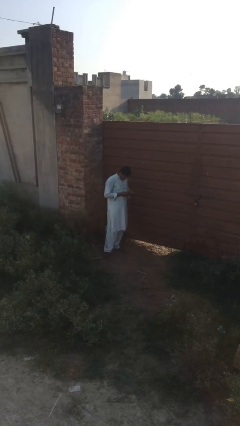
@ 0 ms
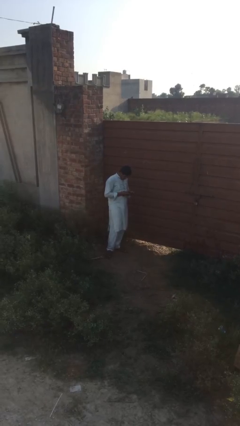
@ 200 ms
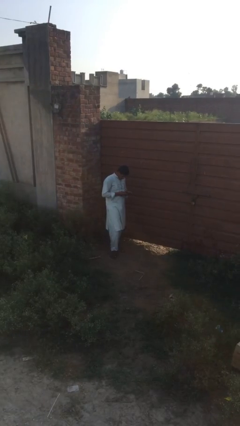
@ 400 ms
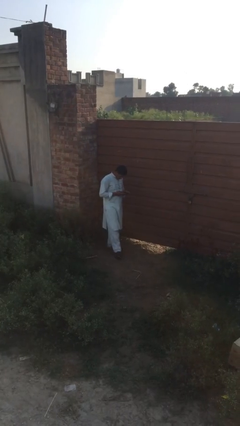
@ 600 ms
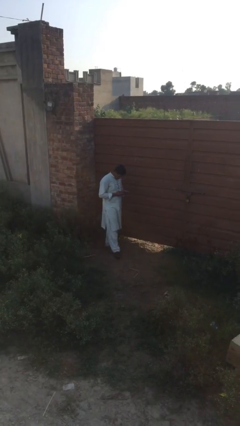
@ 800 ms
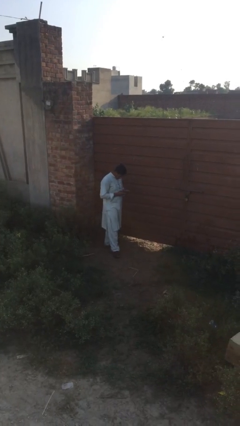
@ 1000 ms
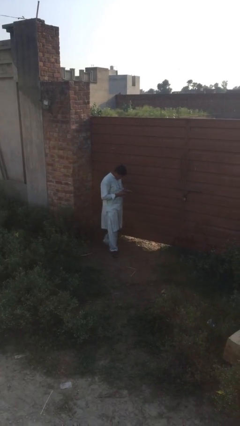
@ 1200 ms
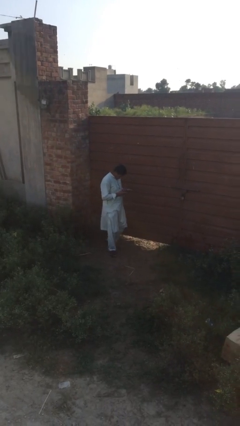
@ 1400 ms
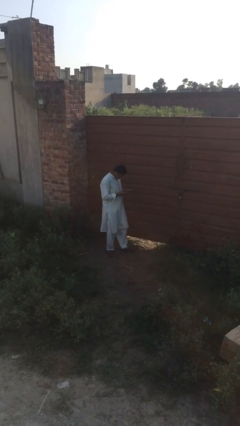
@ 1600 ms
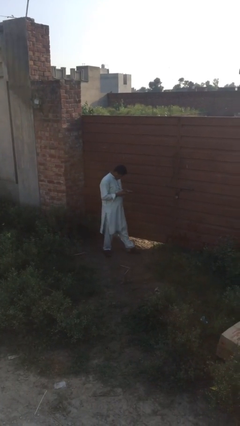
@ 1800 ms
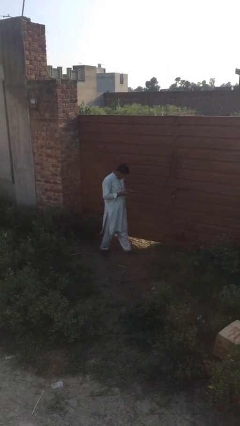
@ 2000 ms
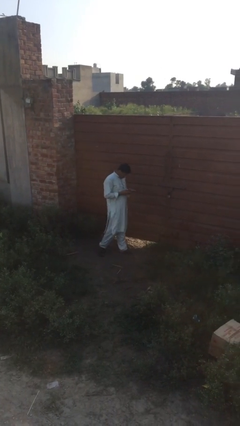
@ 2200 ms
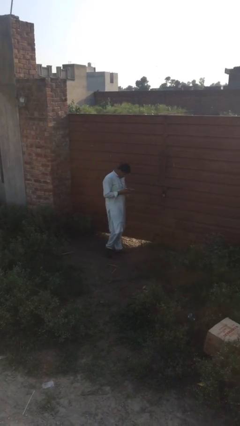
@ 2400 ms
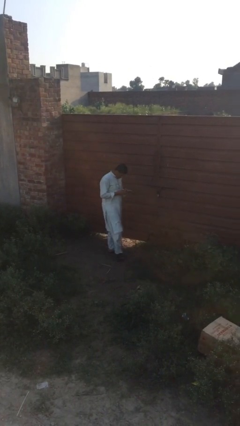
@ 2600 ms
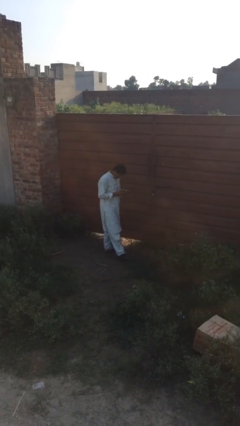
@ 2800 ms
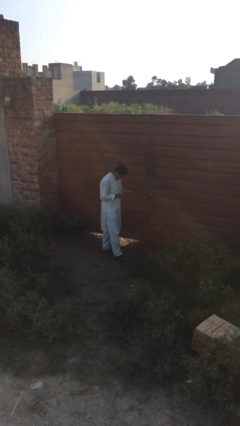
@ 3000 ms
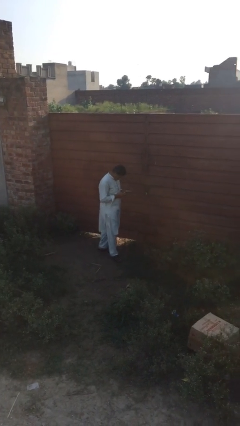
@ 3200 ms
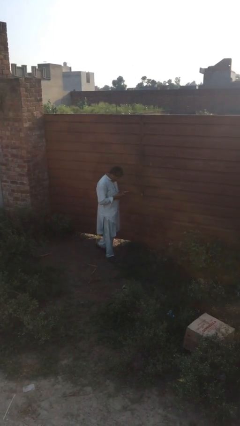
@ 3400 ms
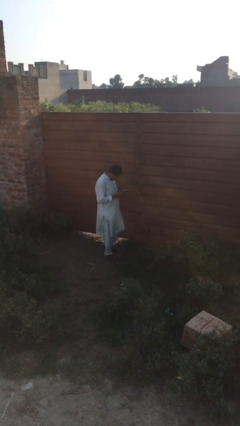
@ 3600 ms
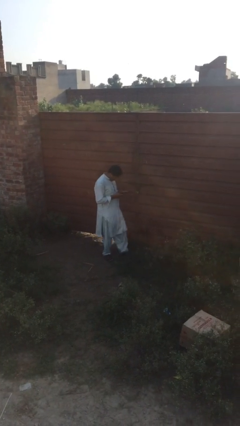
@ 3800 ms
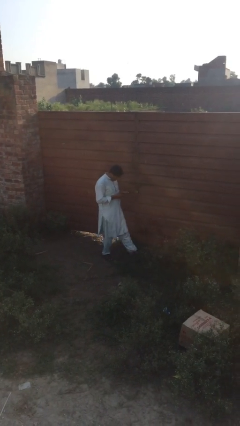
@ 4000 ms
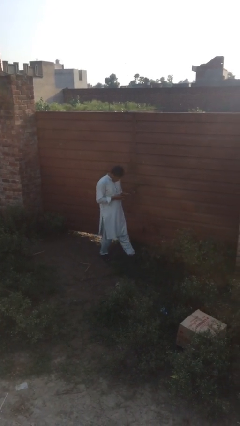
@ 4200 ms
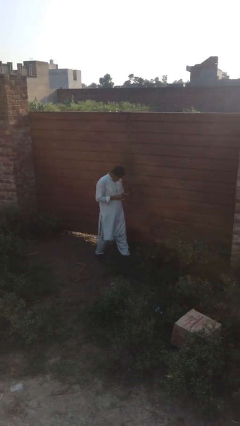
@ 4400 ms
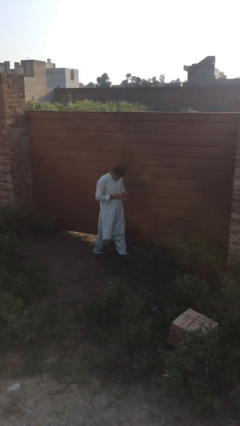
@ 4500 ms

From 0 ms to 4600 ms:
person texts on phone

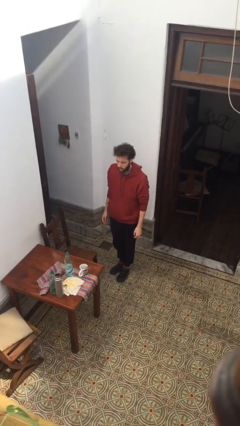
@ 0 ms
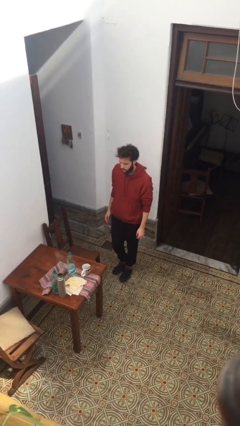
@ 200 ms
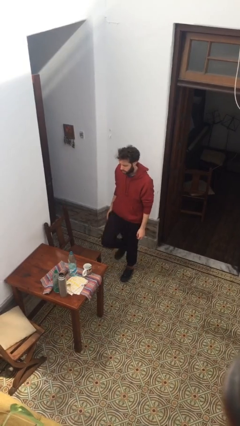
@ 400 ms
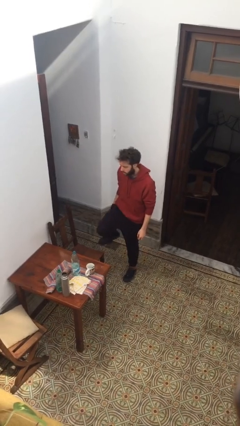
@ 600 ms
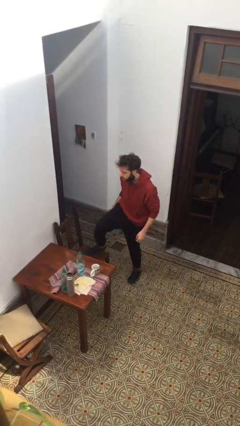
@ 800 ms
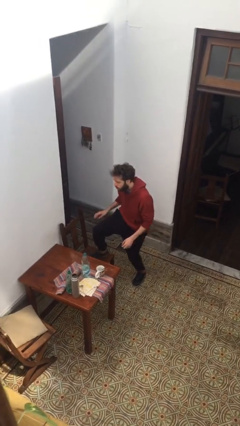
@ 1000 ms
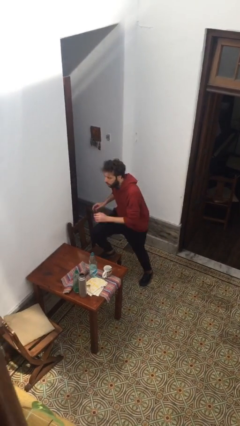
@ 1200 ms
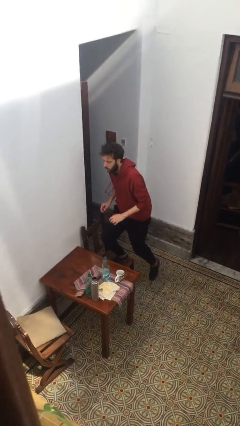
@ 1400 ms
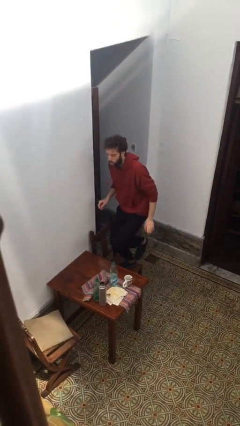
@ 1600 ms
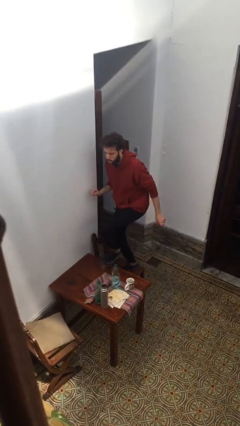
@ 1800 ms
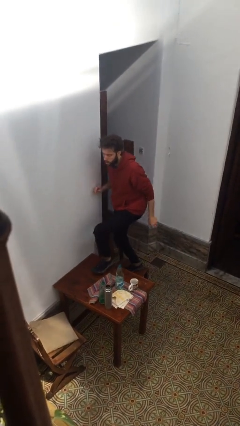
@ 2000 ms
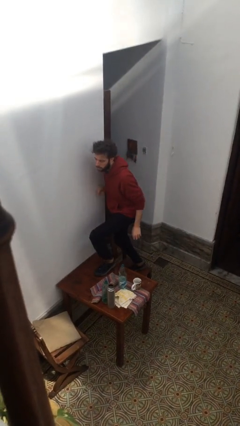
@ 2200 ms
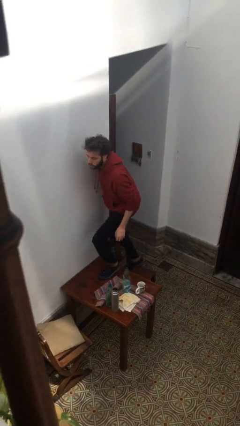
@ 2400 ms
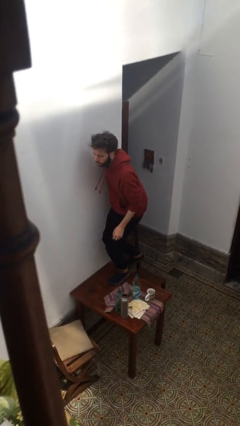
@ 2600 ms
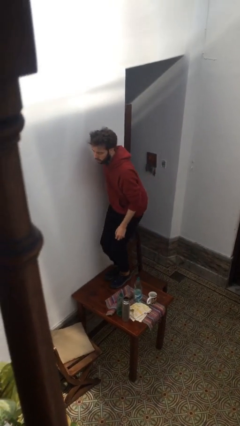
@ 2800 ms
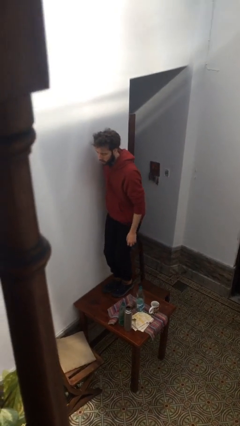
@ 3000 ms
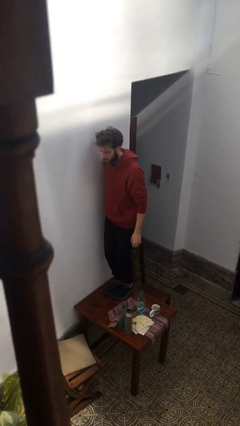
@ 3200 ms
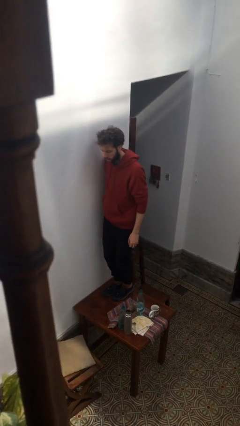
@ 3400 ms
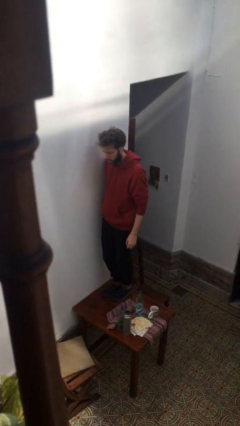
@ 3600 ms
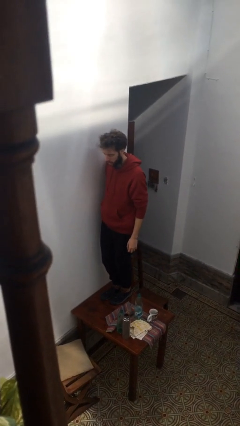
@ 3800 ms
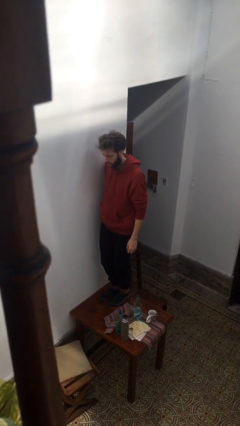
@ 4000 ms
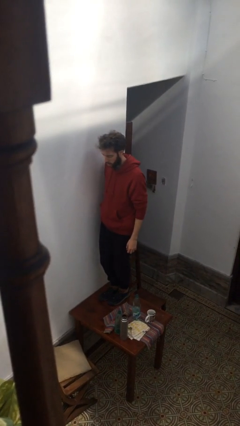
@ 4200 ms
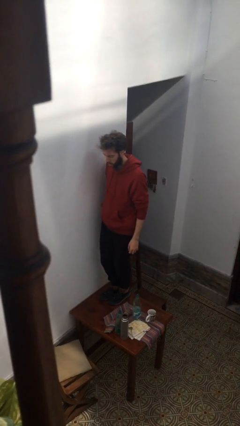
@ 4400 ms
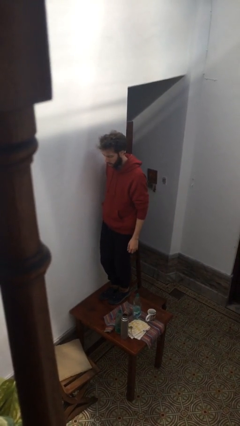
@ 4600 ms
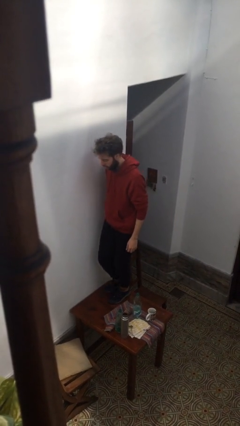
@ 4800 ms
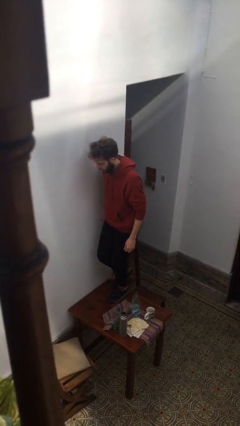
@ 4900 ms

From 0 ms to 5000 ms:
person climbs on table

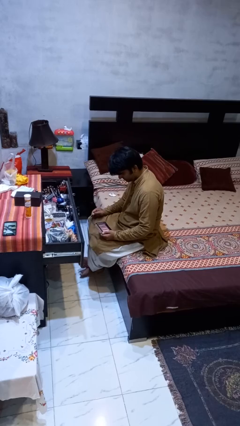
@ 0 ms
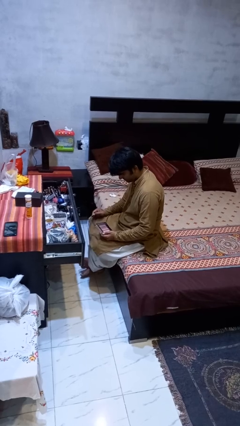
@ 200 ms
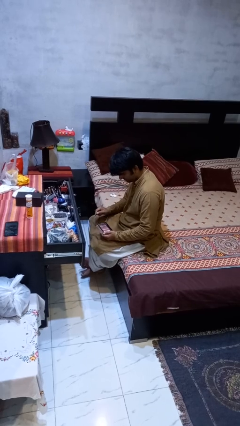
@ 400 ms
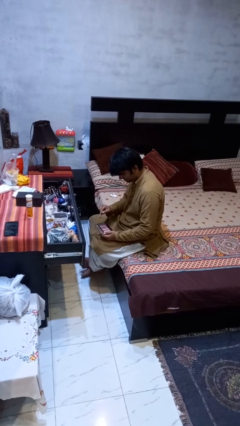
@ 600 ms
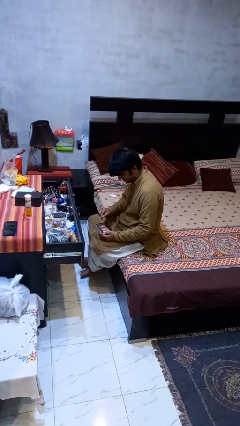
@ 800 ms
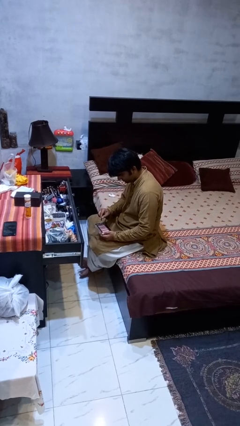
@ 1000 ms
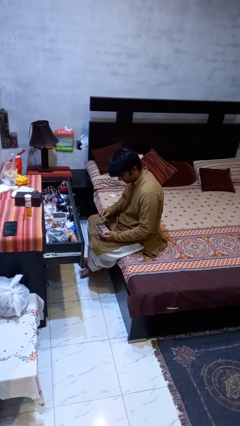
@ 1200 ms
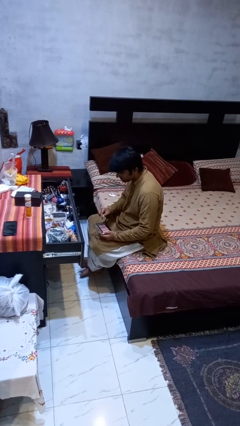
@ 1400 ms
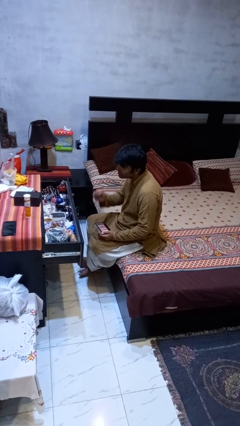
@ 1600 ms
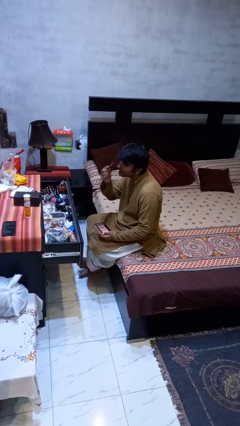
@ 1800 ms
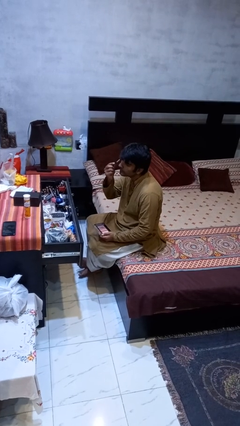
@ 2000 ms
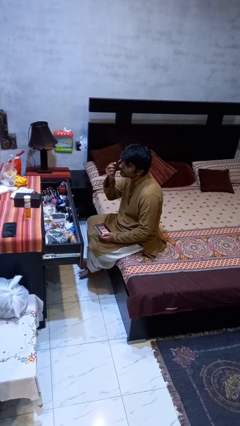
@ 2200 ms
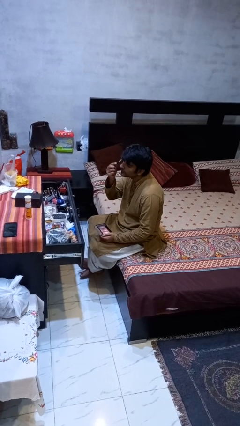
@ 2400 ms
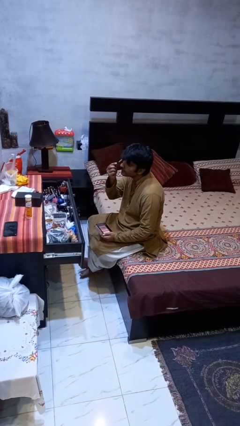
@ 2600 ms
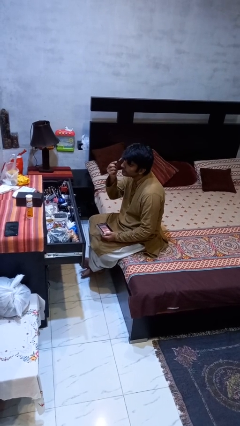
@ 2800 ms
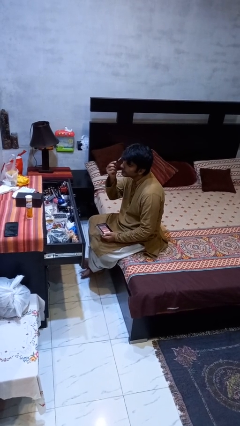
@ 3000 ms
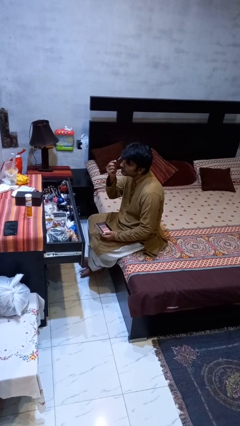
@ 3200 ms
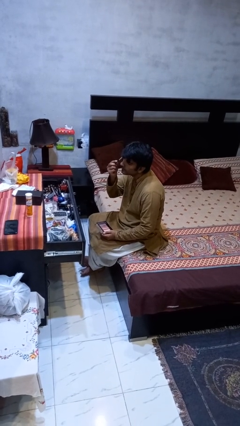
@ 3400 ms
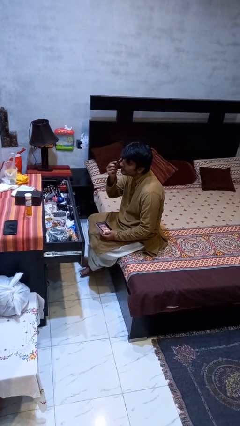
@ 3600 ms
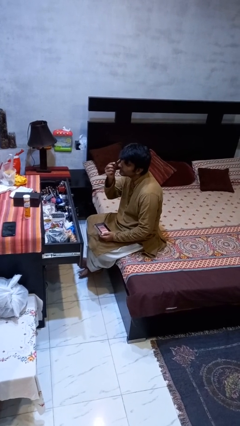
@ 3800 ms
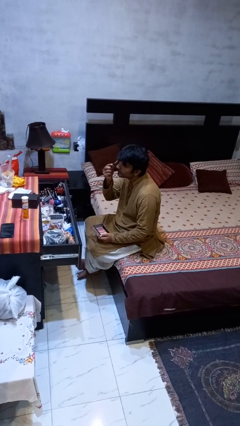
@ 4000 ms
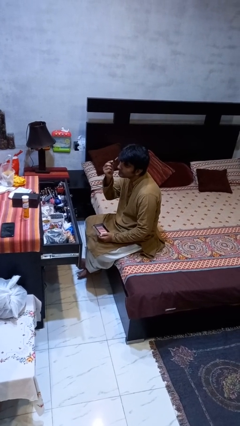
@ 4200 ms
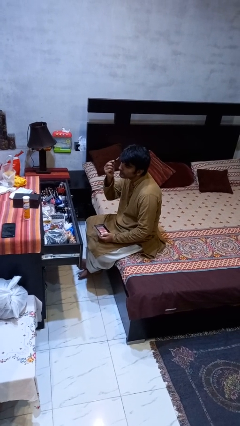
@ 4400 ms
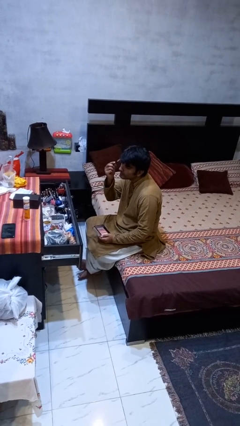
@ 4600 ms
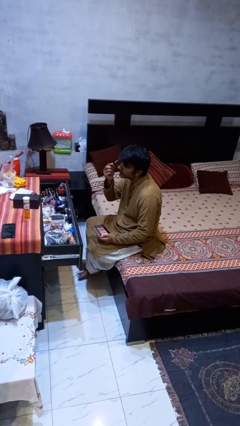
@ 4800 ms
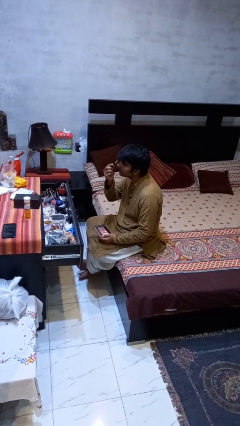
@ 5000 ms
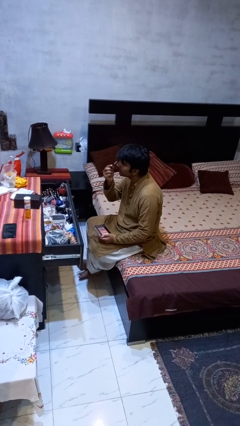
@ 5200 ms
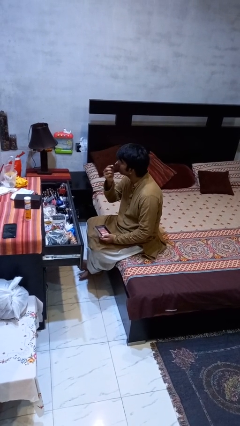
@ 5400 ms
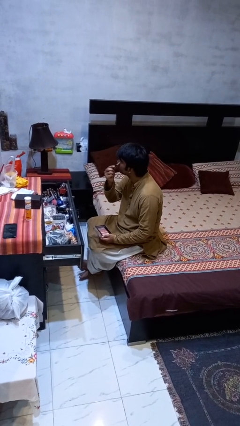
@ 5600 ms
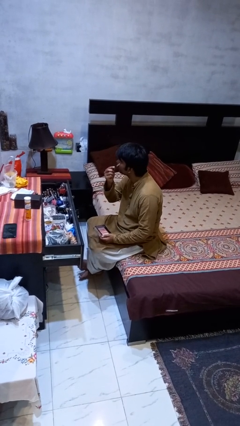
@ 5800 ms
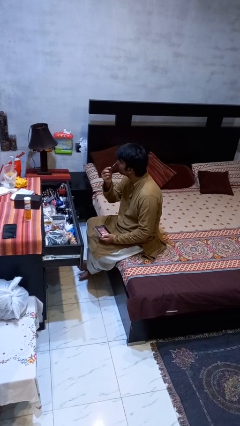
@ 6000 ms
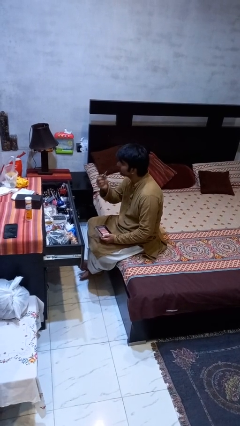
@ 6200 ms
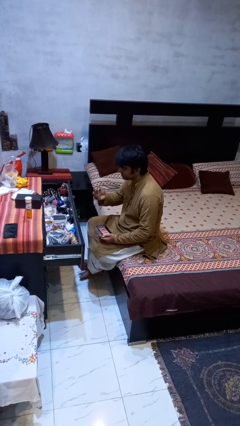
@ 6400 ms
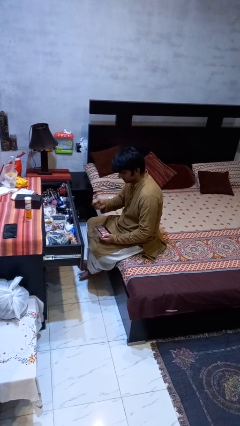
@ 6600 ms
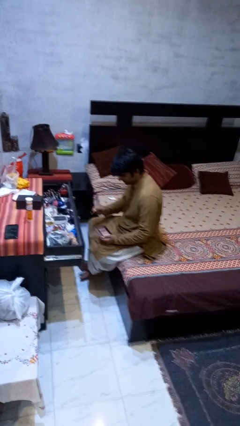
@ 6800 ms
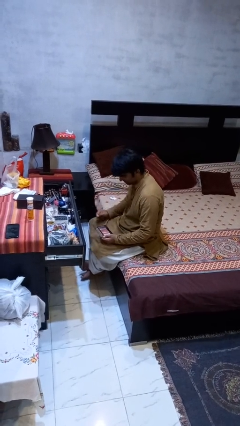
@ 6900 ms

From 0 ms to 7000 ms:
person applies eye makeup

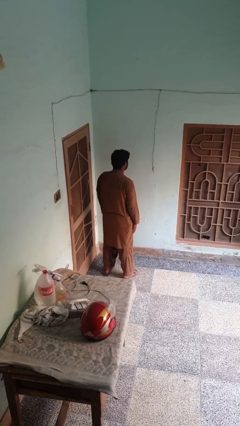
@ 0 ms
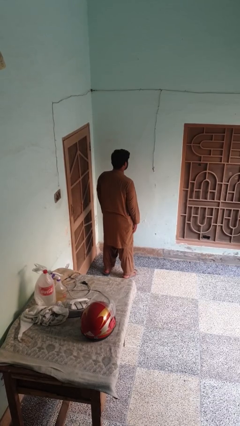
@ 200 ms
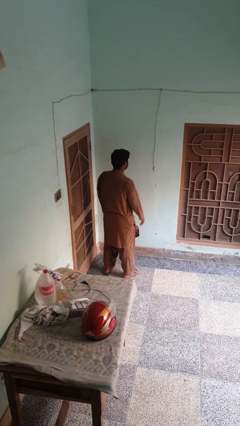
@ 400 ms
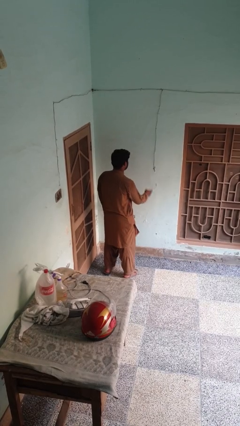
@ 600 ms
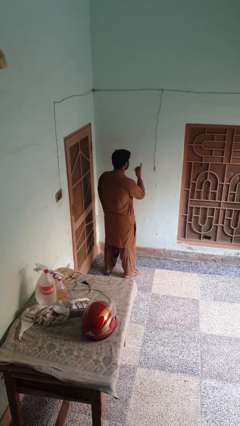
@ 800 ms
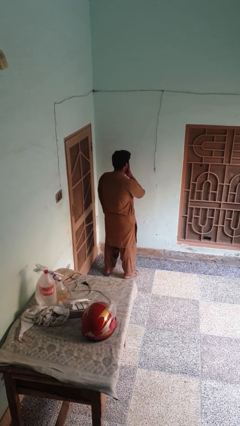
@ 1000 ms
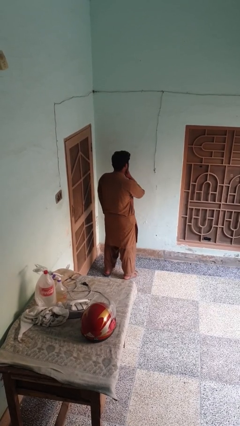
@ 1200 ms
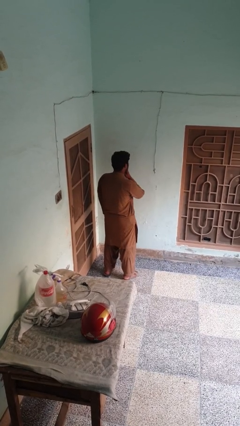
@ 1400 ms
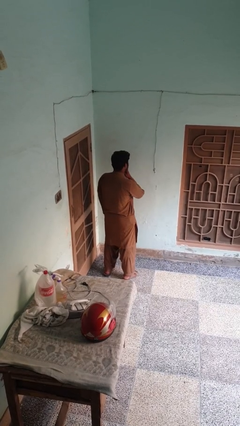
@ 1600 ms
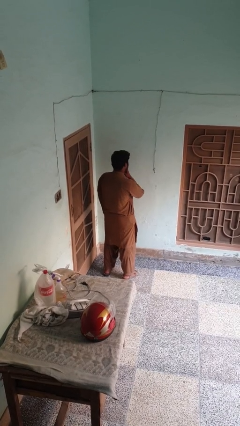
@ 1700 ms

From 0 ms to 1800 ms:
person gestures be quiet
